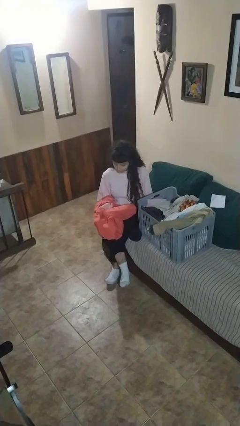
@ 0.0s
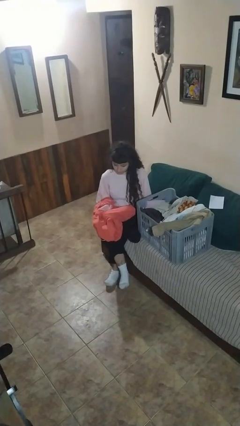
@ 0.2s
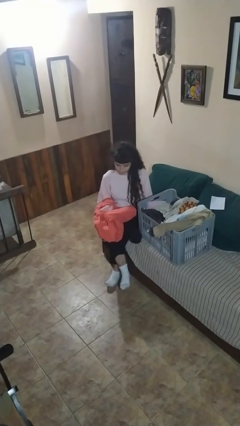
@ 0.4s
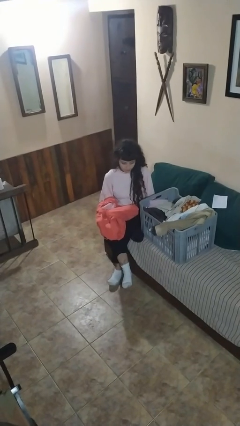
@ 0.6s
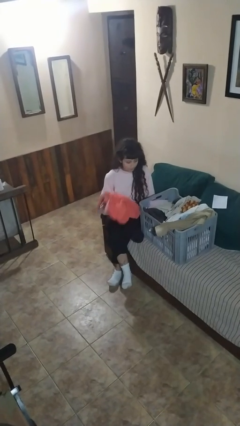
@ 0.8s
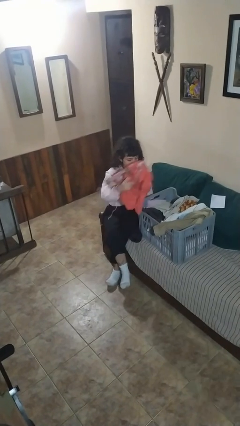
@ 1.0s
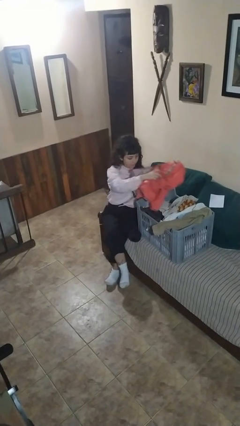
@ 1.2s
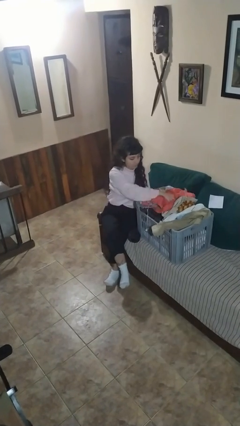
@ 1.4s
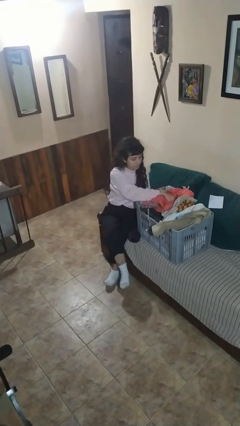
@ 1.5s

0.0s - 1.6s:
person puts object into basket

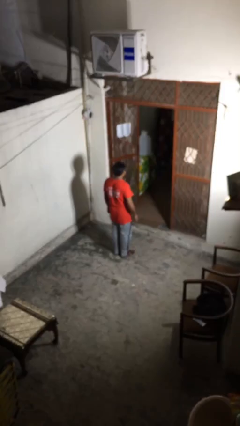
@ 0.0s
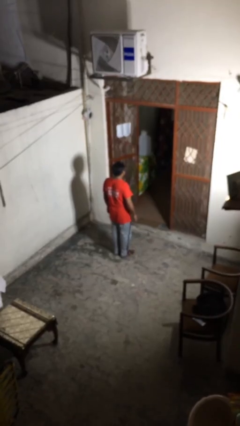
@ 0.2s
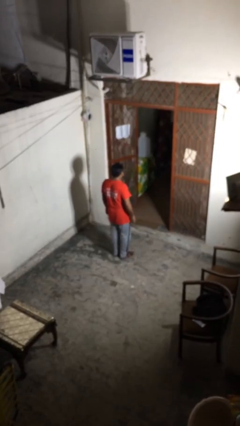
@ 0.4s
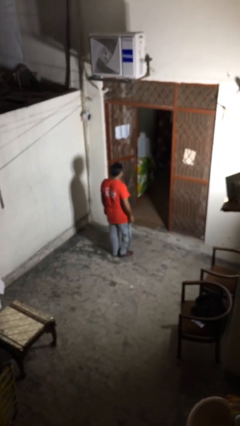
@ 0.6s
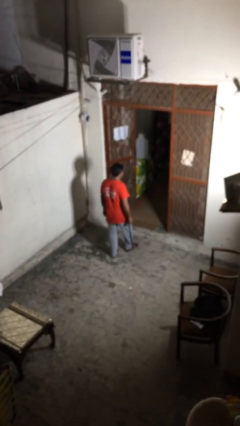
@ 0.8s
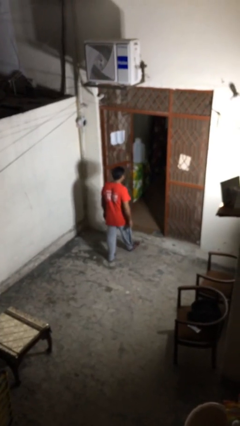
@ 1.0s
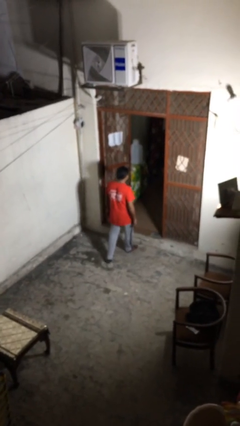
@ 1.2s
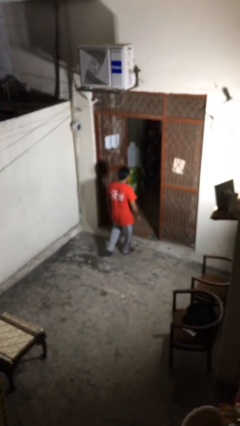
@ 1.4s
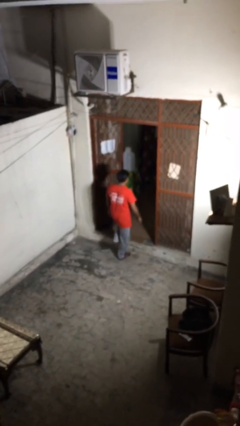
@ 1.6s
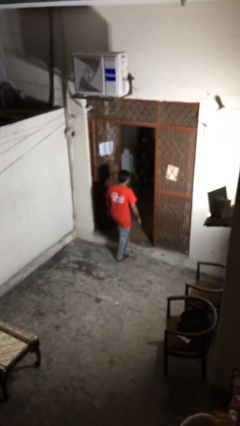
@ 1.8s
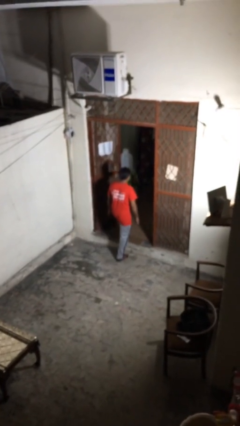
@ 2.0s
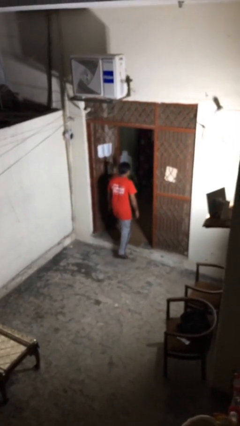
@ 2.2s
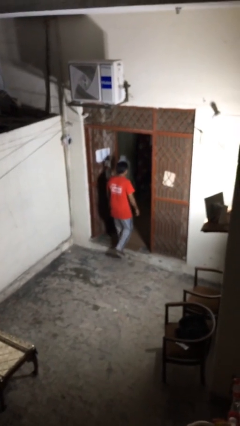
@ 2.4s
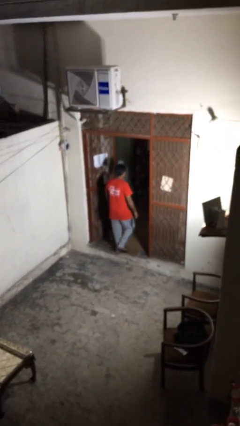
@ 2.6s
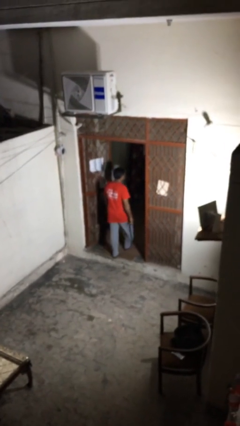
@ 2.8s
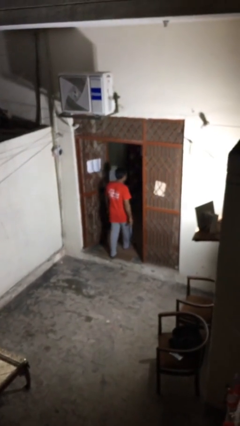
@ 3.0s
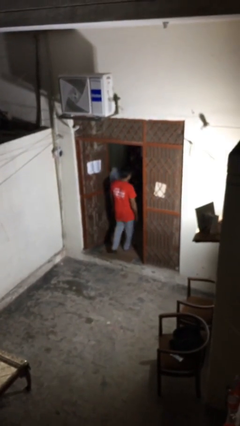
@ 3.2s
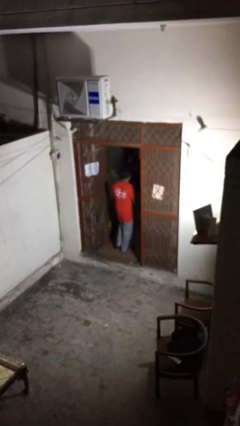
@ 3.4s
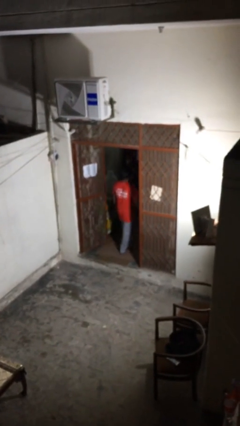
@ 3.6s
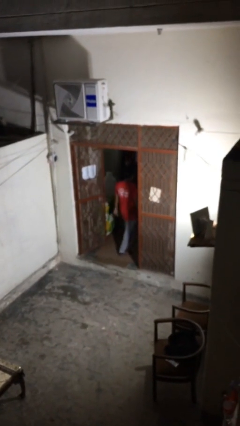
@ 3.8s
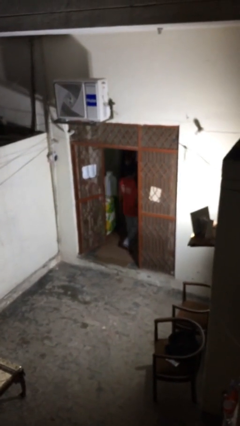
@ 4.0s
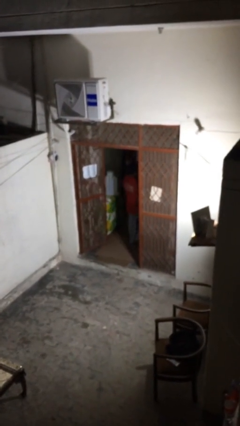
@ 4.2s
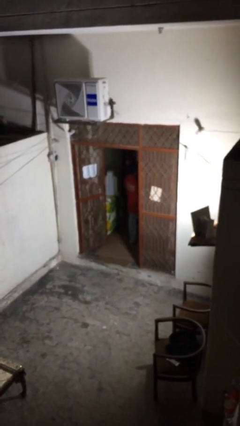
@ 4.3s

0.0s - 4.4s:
person exits scene through structure

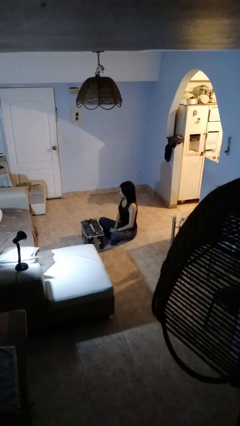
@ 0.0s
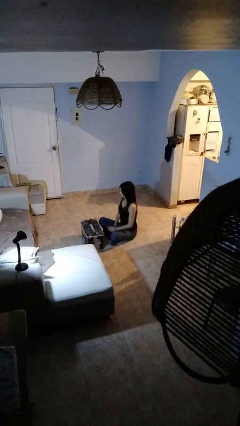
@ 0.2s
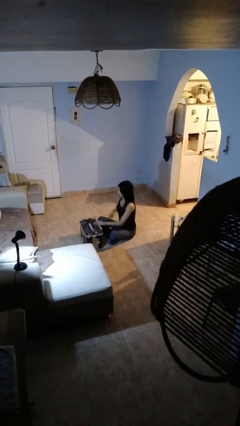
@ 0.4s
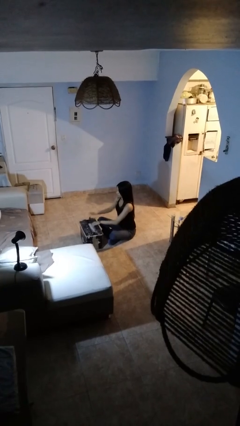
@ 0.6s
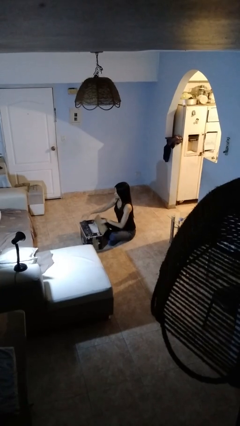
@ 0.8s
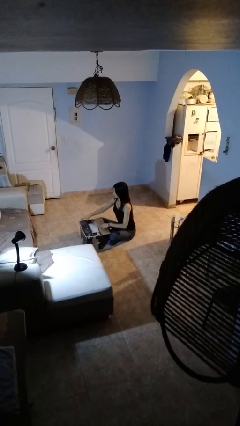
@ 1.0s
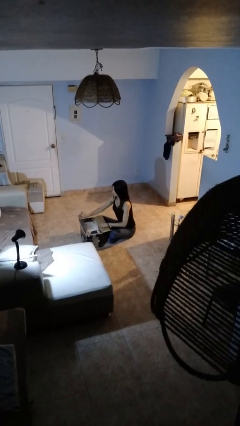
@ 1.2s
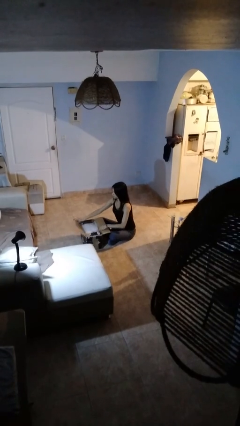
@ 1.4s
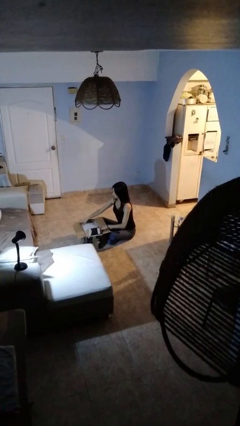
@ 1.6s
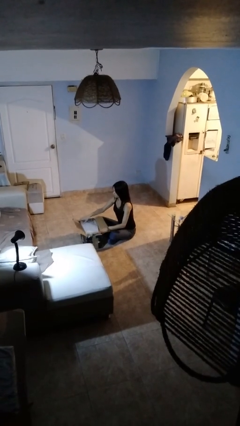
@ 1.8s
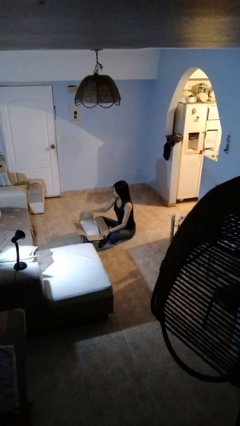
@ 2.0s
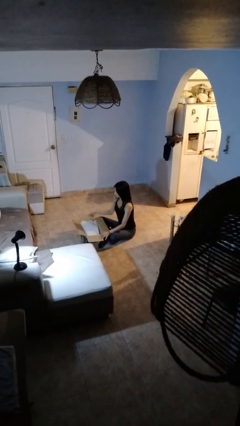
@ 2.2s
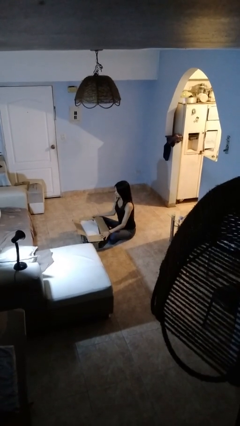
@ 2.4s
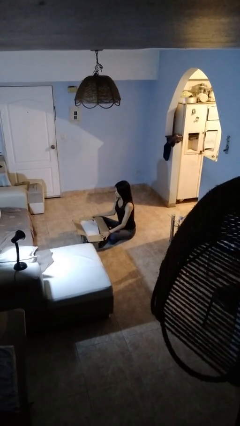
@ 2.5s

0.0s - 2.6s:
person opens box

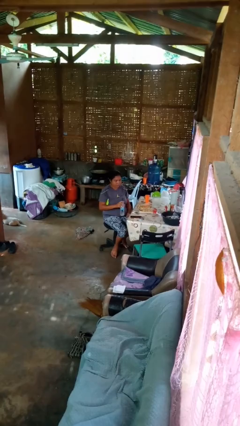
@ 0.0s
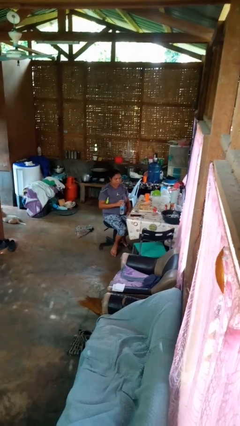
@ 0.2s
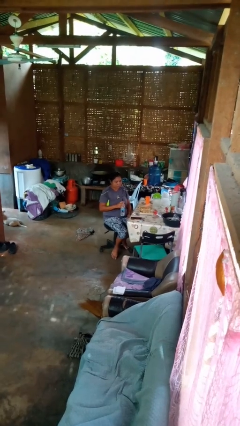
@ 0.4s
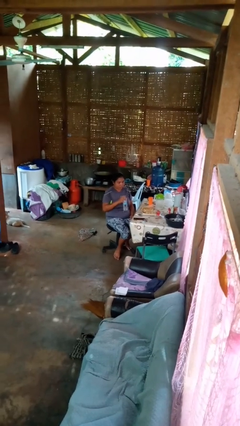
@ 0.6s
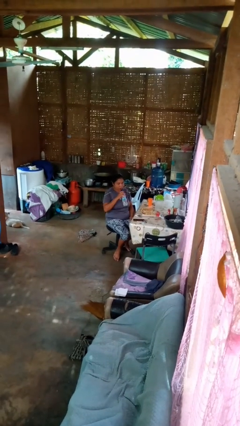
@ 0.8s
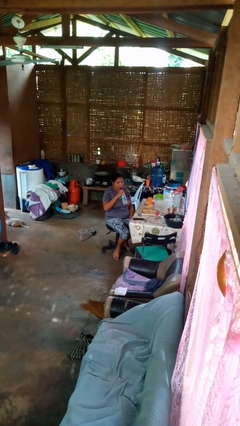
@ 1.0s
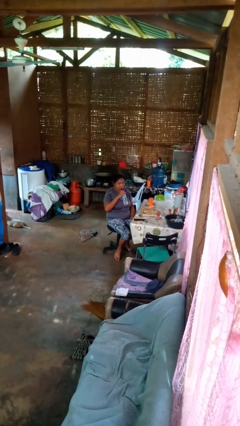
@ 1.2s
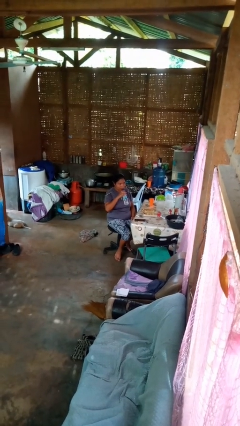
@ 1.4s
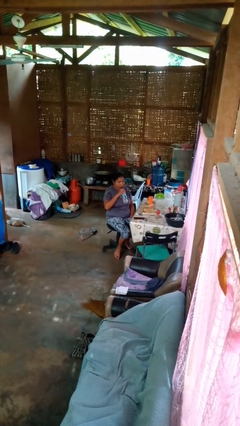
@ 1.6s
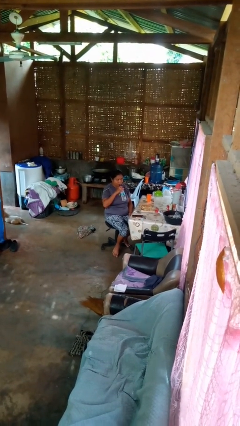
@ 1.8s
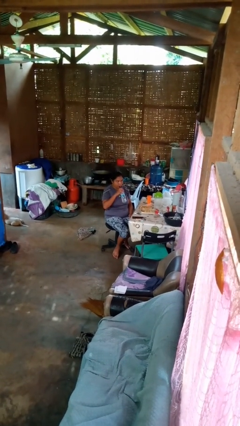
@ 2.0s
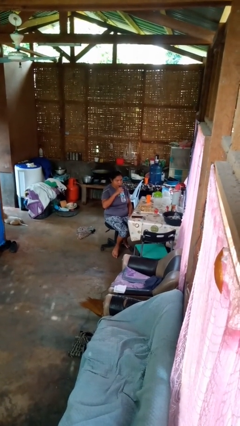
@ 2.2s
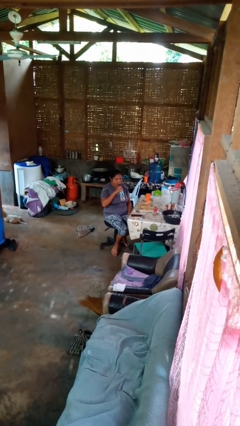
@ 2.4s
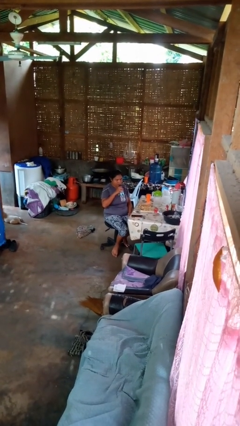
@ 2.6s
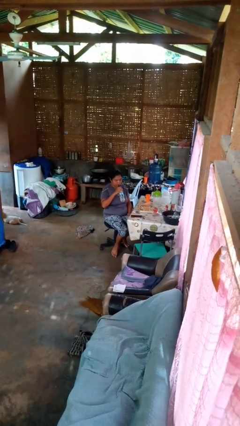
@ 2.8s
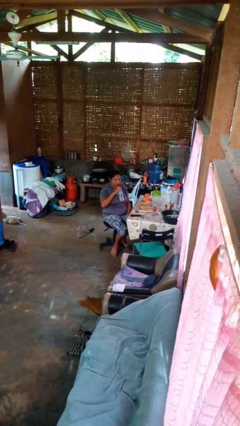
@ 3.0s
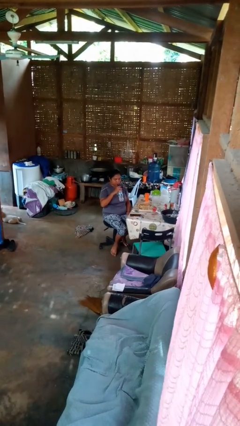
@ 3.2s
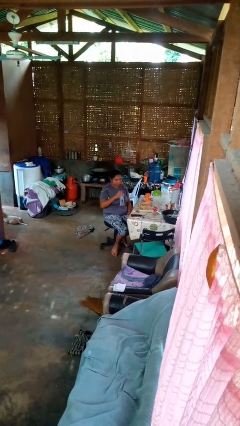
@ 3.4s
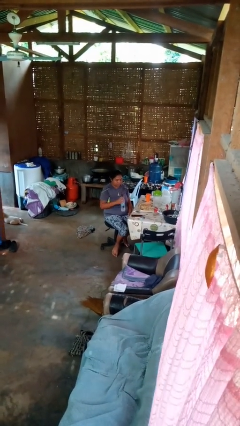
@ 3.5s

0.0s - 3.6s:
person drinks from straw

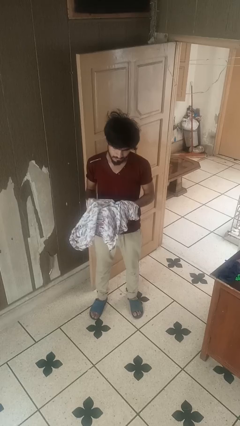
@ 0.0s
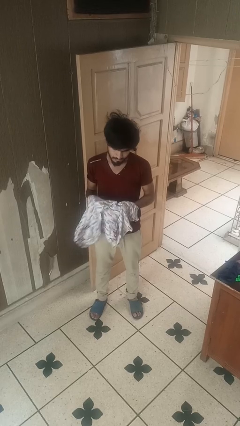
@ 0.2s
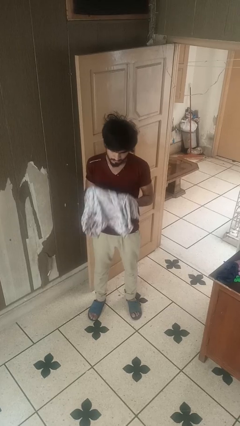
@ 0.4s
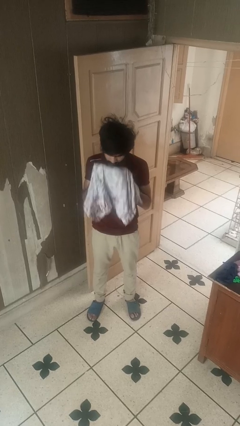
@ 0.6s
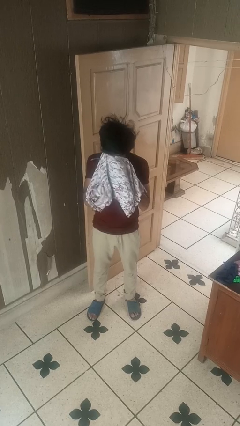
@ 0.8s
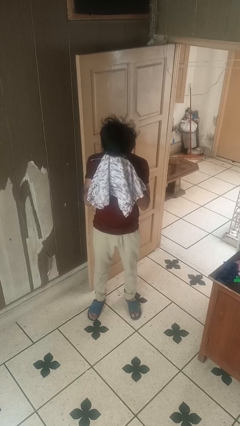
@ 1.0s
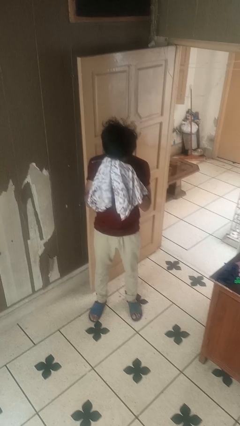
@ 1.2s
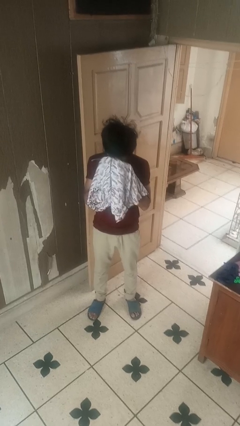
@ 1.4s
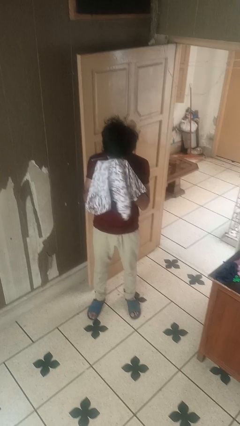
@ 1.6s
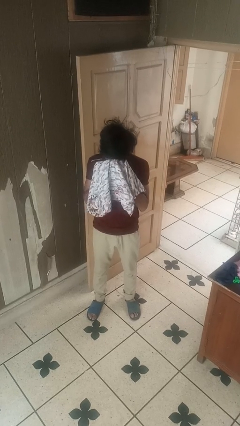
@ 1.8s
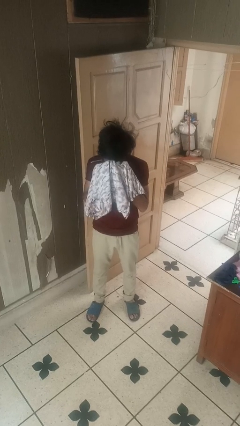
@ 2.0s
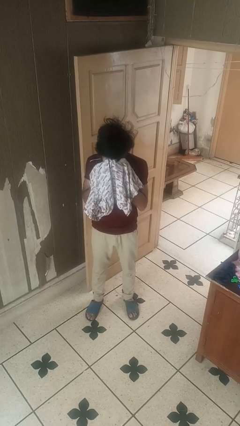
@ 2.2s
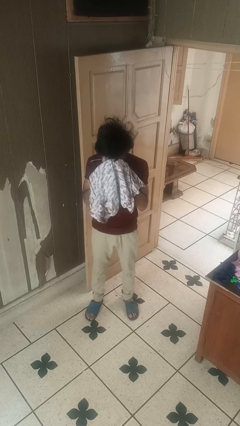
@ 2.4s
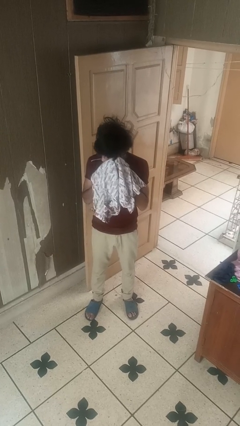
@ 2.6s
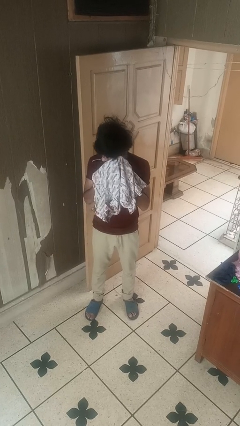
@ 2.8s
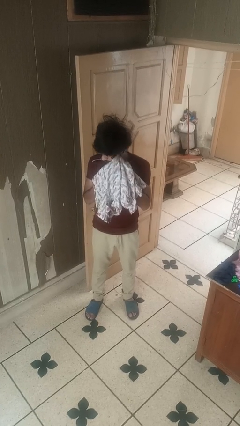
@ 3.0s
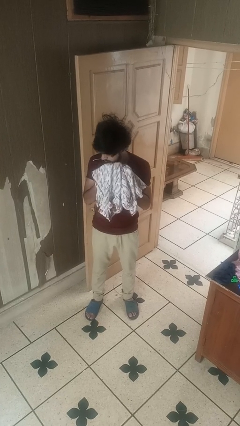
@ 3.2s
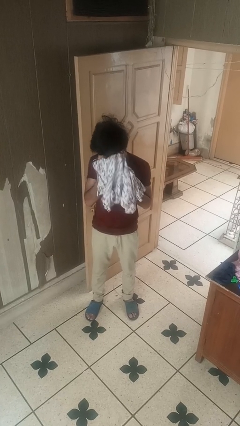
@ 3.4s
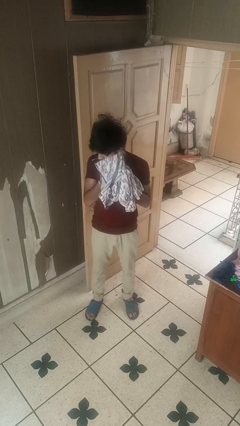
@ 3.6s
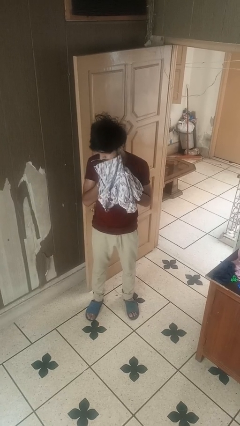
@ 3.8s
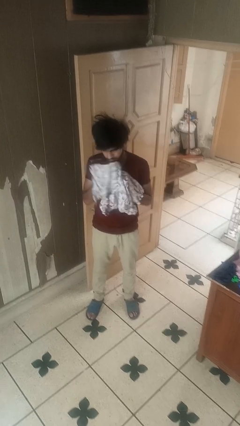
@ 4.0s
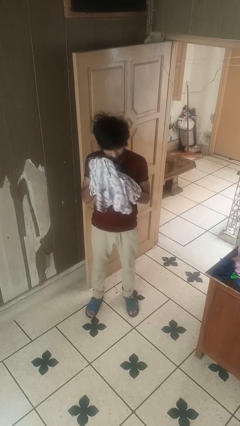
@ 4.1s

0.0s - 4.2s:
person wipes mouth with napkin

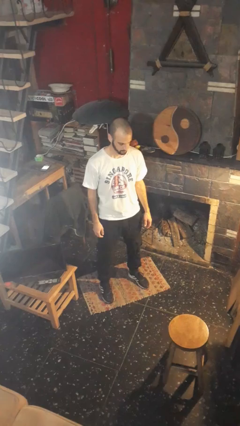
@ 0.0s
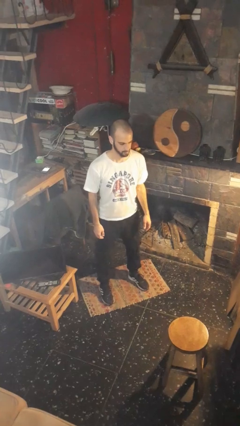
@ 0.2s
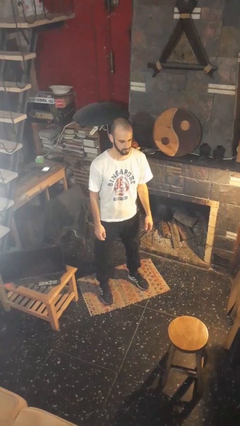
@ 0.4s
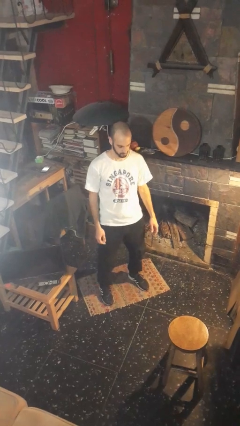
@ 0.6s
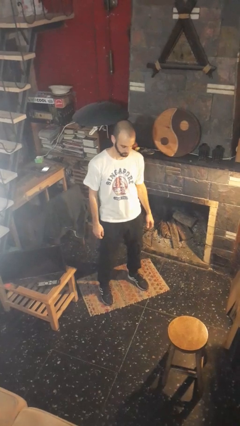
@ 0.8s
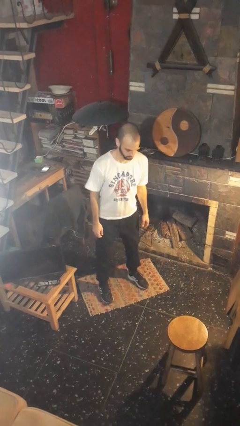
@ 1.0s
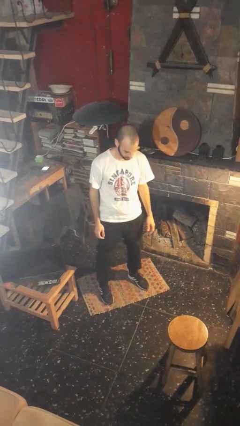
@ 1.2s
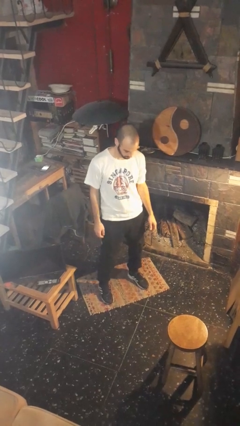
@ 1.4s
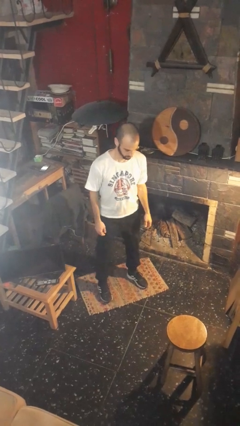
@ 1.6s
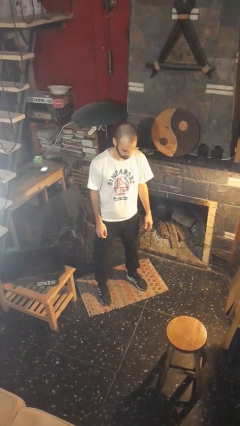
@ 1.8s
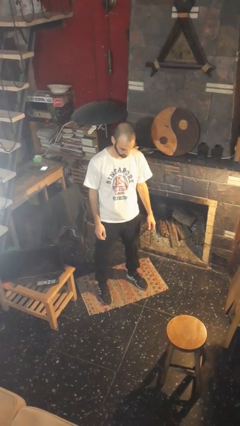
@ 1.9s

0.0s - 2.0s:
person wiggles hips
